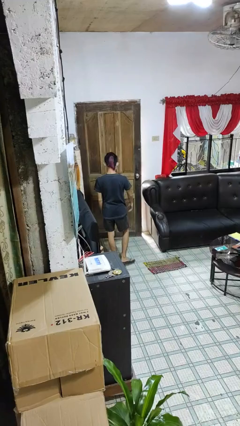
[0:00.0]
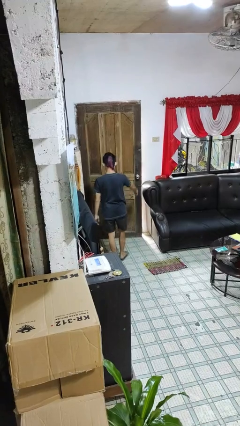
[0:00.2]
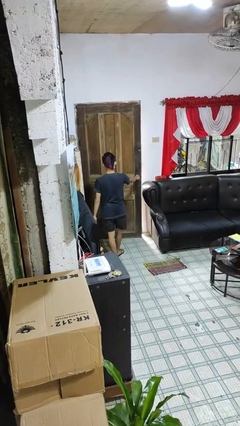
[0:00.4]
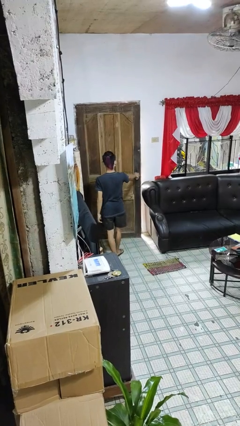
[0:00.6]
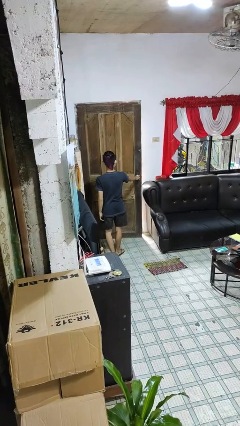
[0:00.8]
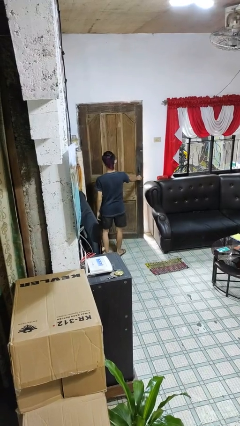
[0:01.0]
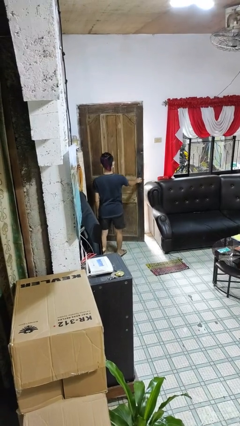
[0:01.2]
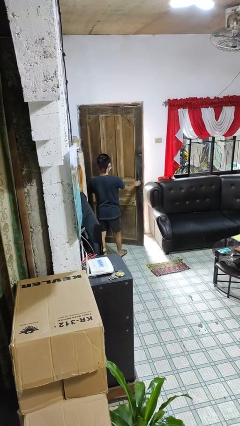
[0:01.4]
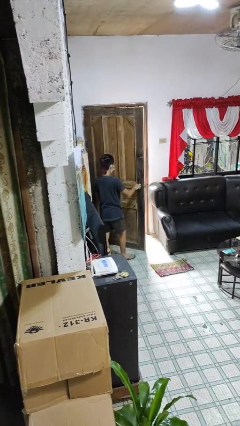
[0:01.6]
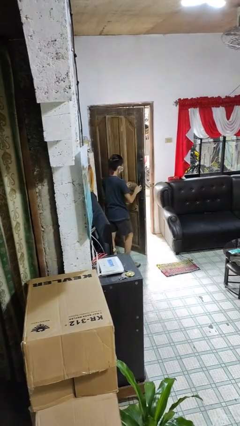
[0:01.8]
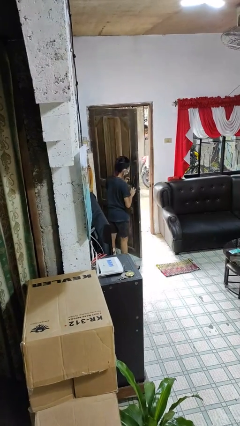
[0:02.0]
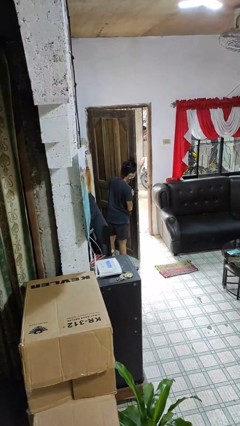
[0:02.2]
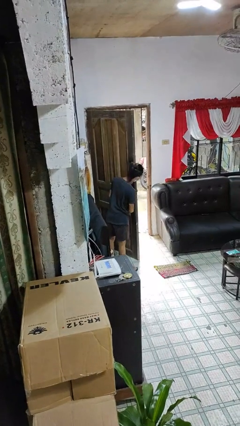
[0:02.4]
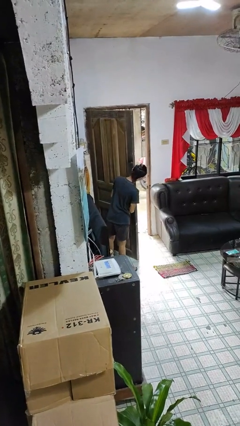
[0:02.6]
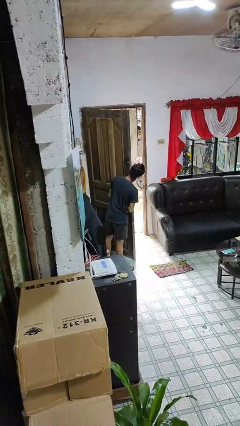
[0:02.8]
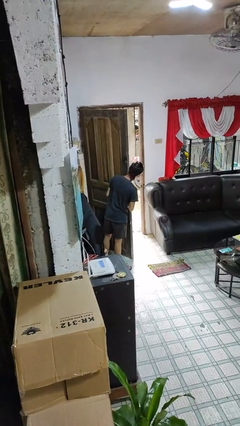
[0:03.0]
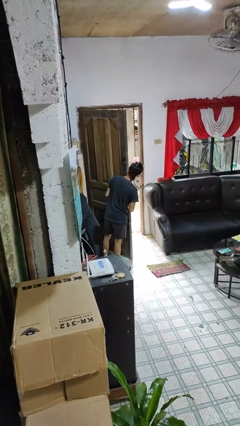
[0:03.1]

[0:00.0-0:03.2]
person opens facility door

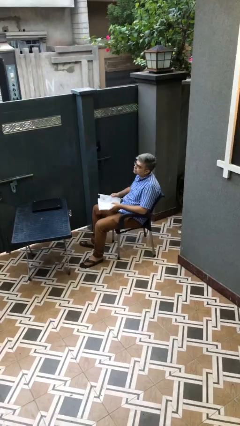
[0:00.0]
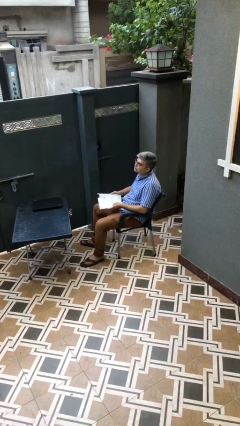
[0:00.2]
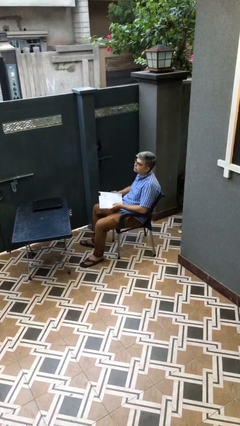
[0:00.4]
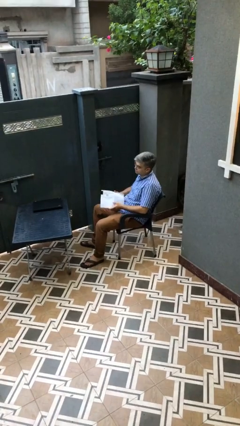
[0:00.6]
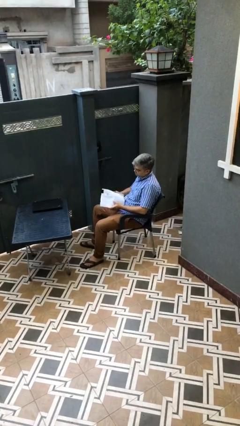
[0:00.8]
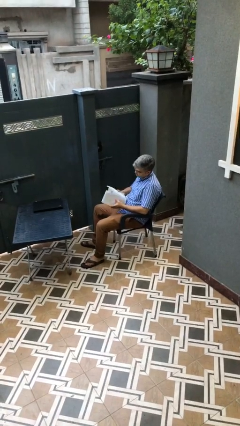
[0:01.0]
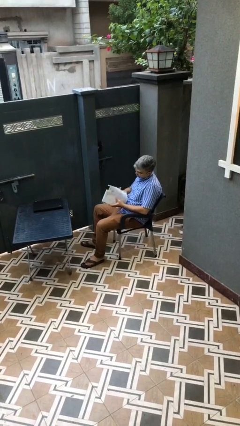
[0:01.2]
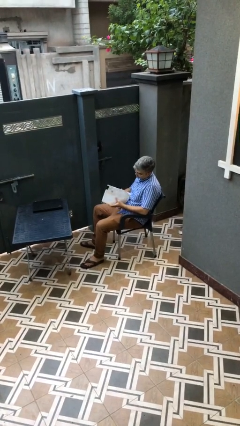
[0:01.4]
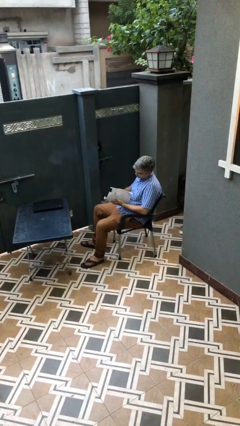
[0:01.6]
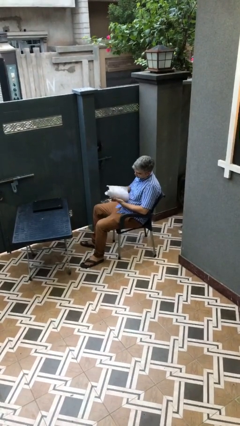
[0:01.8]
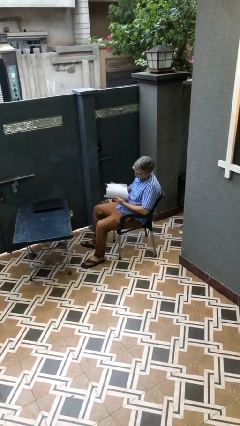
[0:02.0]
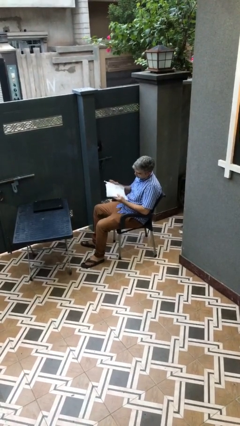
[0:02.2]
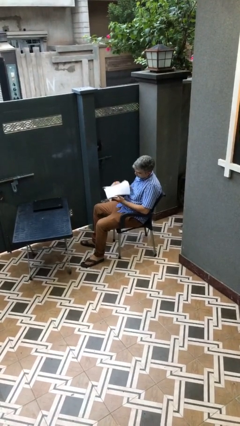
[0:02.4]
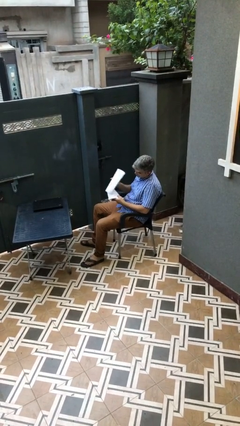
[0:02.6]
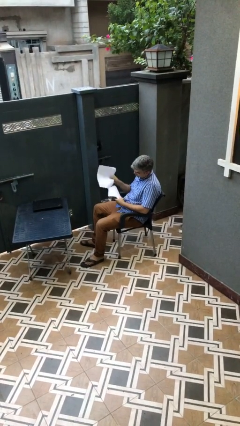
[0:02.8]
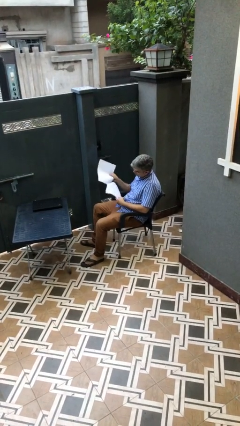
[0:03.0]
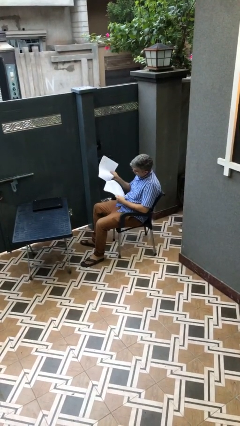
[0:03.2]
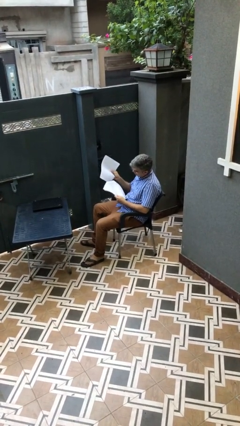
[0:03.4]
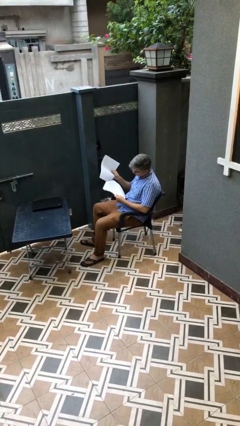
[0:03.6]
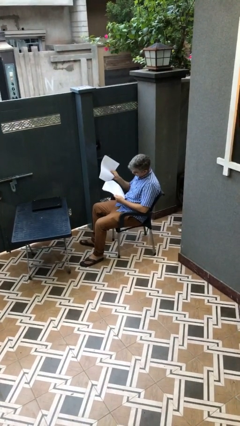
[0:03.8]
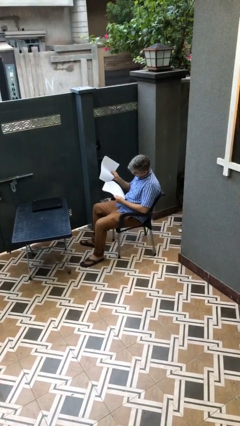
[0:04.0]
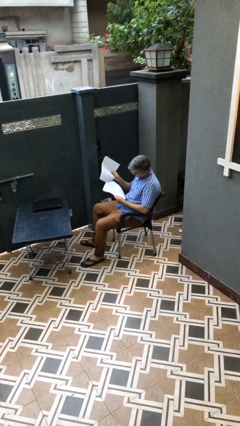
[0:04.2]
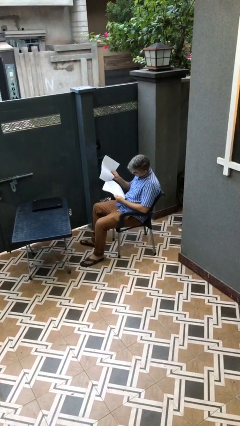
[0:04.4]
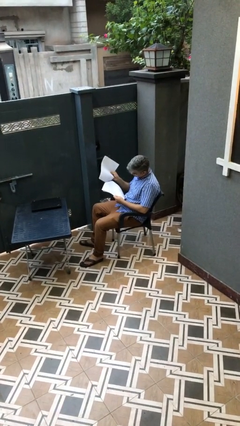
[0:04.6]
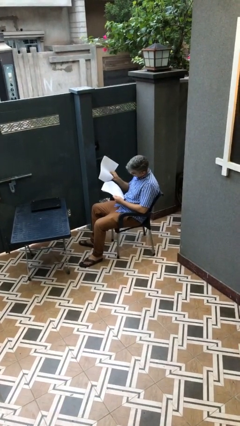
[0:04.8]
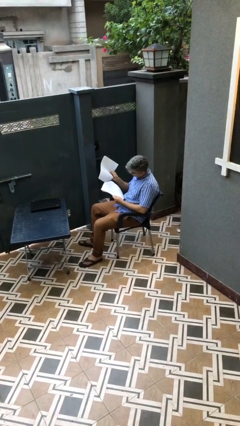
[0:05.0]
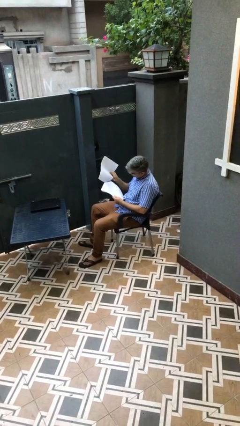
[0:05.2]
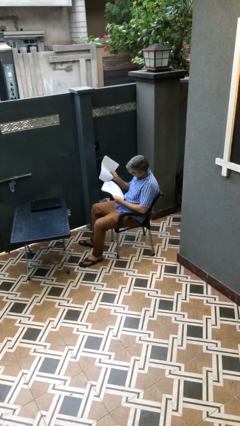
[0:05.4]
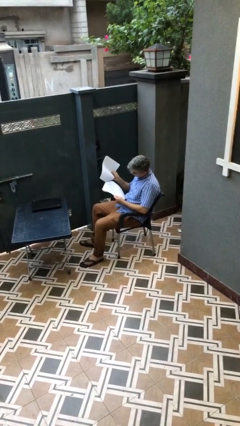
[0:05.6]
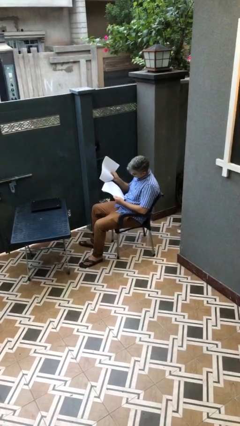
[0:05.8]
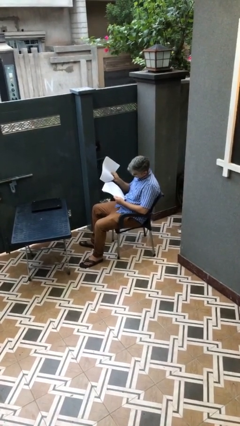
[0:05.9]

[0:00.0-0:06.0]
person reads document

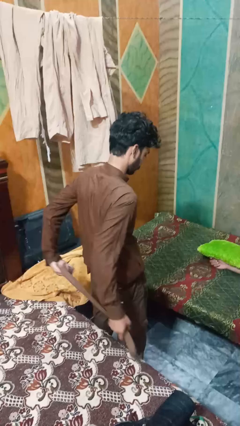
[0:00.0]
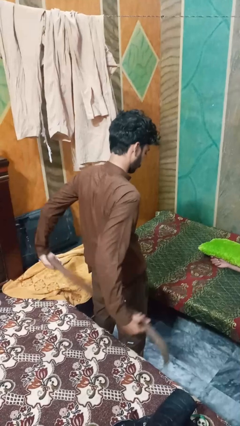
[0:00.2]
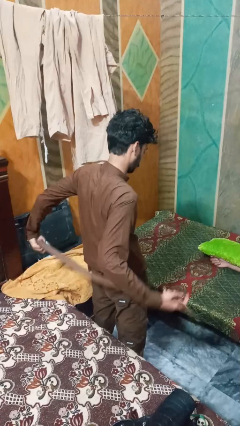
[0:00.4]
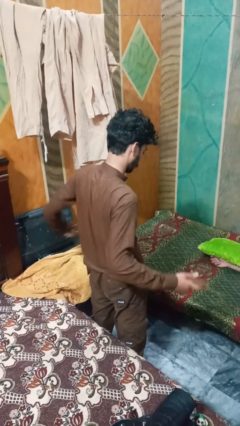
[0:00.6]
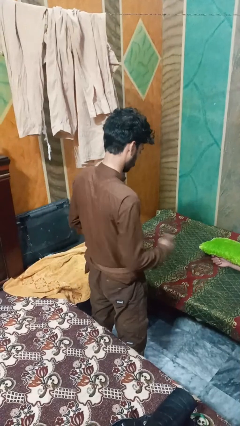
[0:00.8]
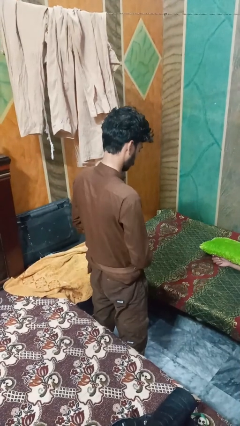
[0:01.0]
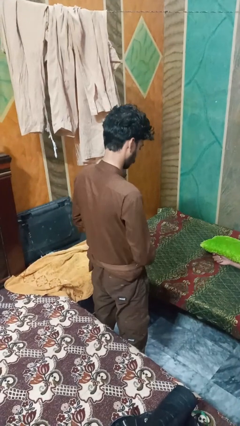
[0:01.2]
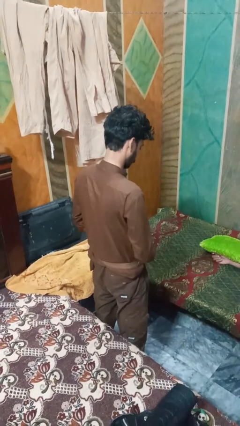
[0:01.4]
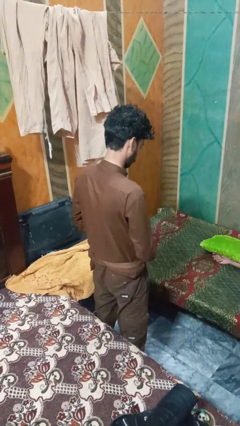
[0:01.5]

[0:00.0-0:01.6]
person puts on belt

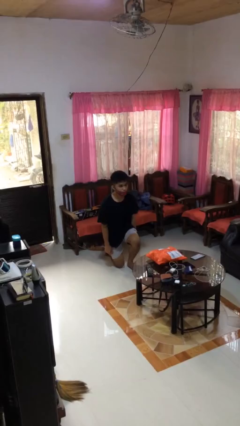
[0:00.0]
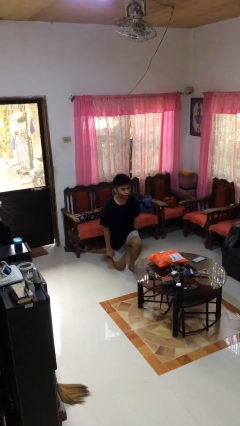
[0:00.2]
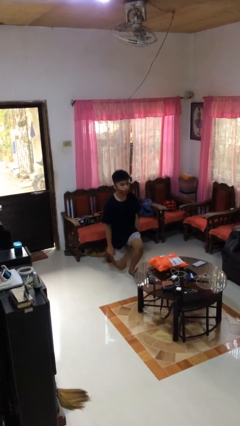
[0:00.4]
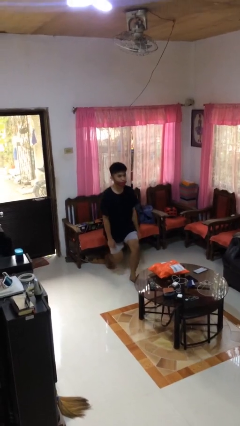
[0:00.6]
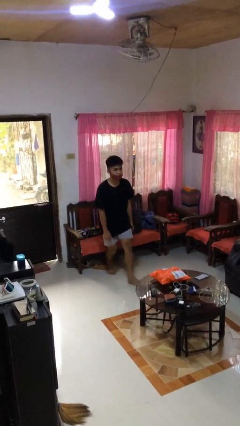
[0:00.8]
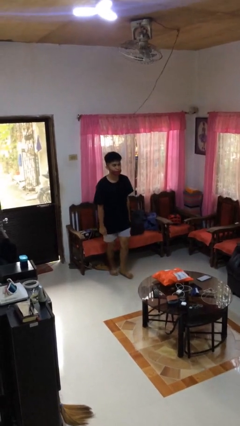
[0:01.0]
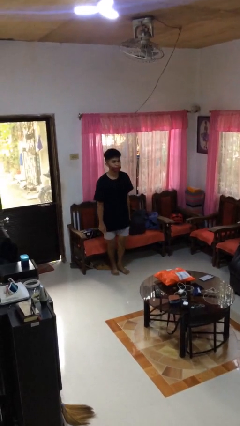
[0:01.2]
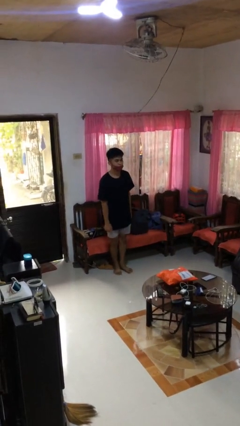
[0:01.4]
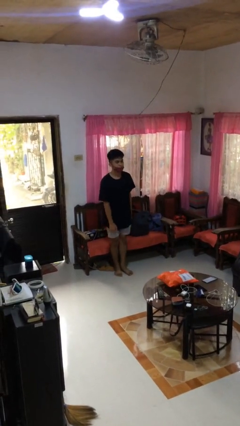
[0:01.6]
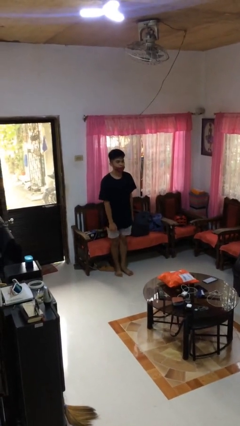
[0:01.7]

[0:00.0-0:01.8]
person stands up from floor

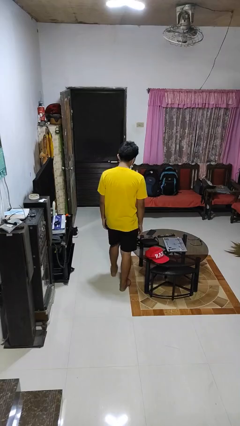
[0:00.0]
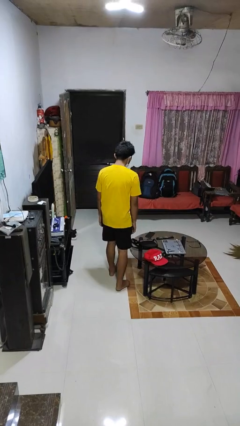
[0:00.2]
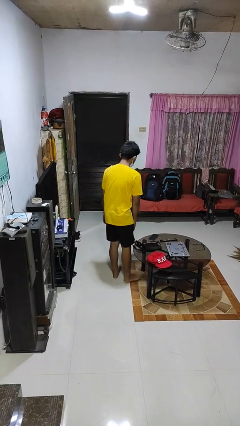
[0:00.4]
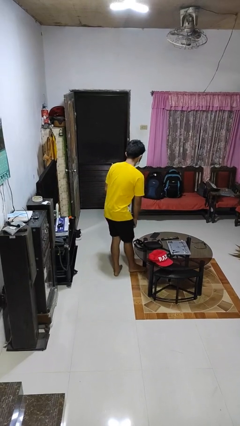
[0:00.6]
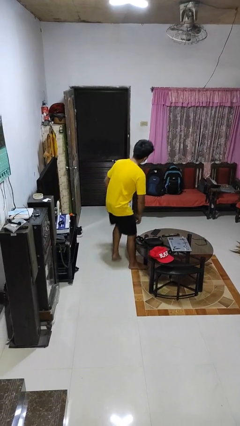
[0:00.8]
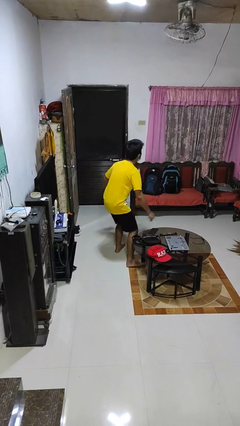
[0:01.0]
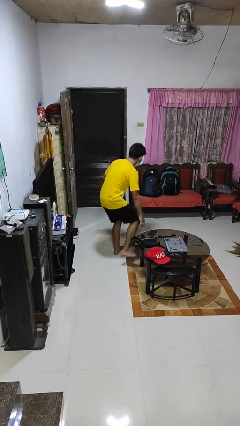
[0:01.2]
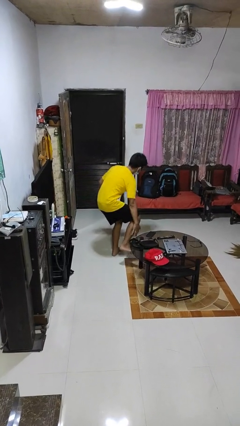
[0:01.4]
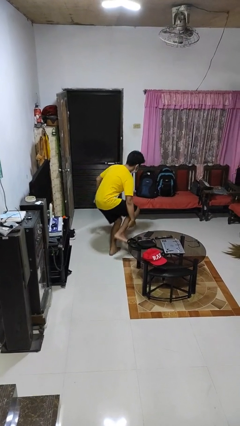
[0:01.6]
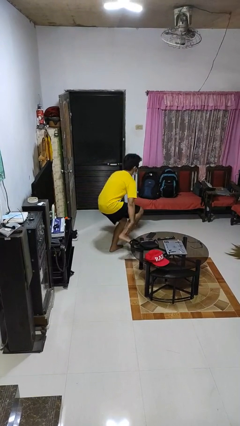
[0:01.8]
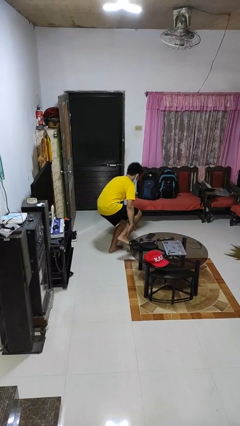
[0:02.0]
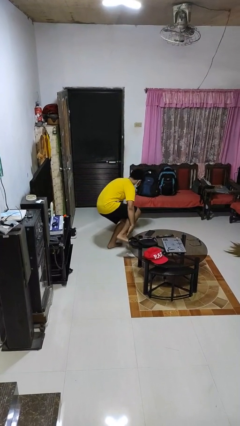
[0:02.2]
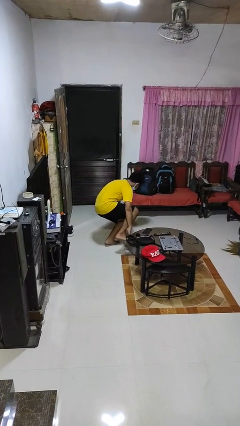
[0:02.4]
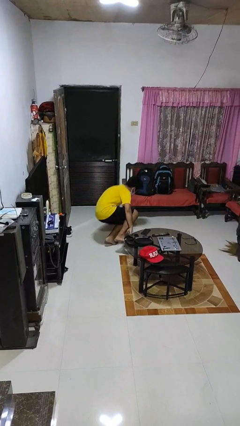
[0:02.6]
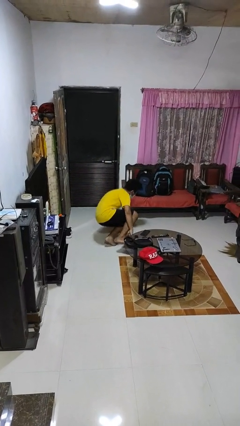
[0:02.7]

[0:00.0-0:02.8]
person trips on object on floor

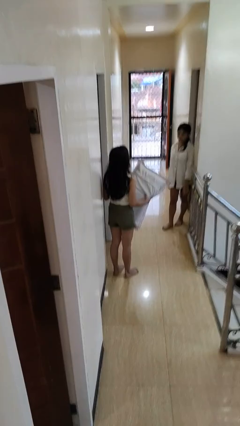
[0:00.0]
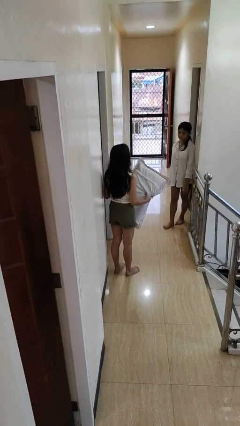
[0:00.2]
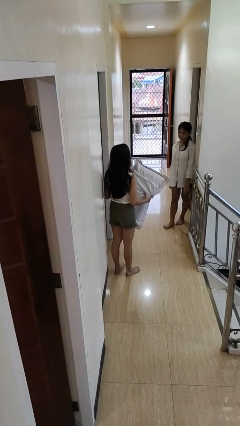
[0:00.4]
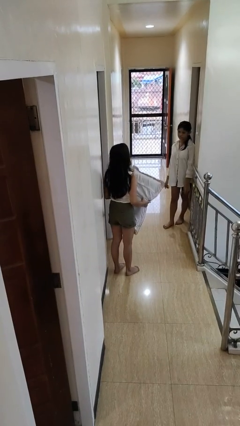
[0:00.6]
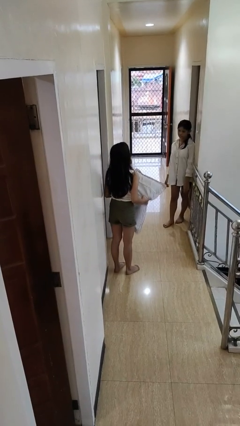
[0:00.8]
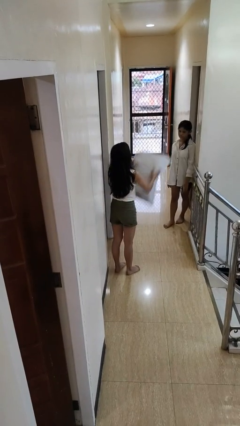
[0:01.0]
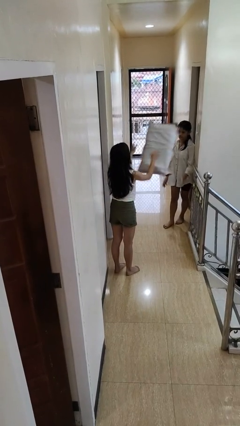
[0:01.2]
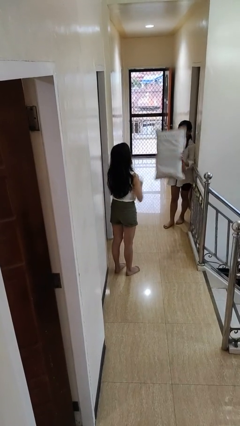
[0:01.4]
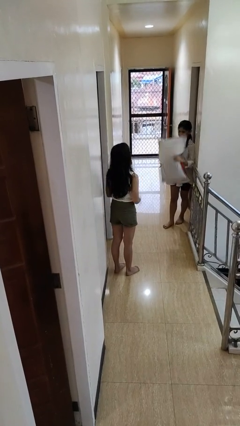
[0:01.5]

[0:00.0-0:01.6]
person throws object to person

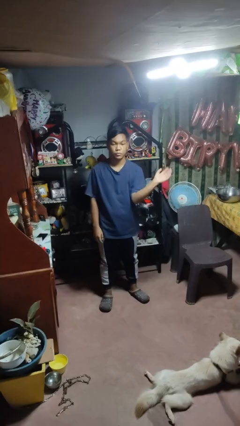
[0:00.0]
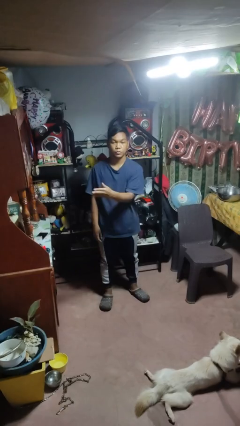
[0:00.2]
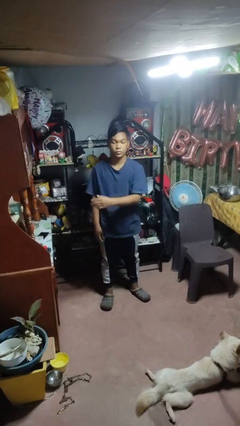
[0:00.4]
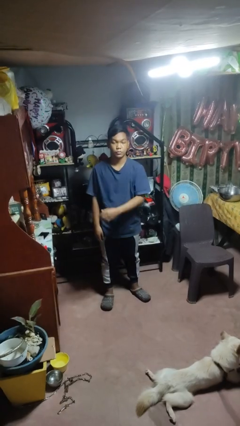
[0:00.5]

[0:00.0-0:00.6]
person gestures swipe right
